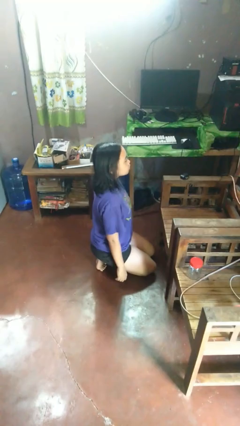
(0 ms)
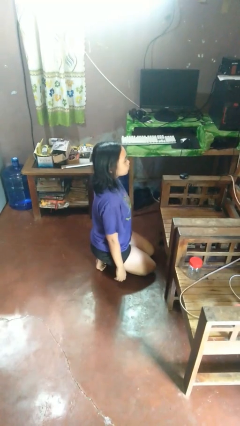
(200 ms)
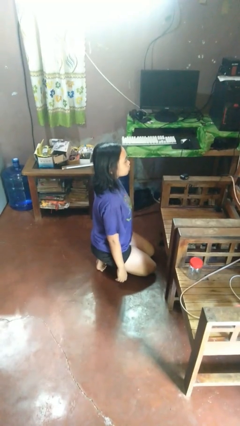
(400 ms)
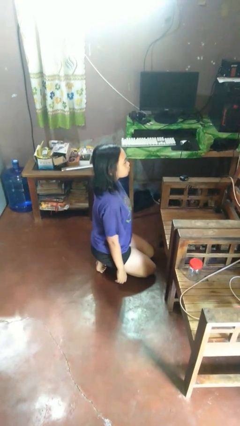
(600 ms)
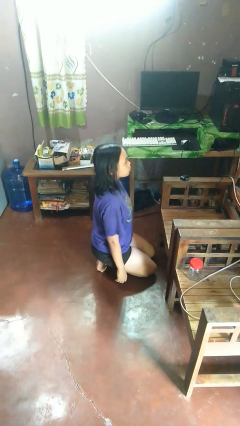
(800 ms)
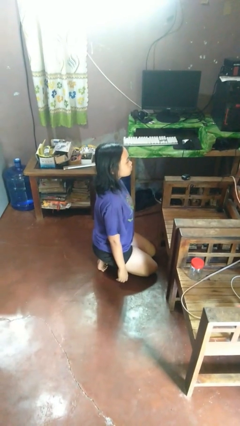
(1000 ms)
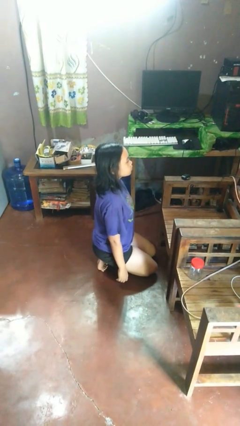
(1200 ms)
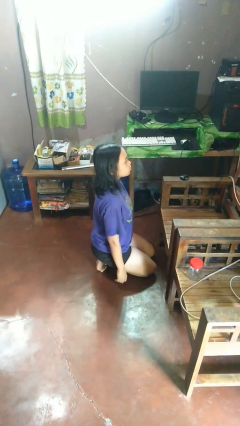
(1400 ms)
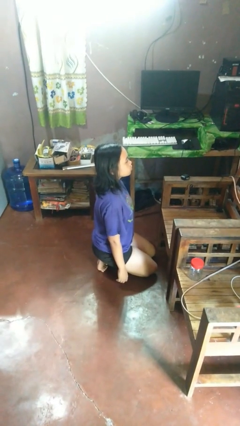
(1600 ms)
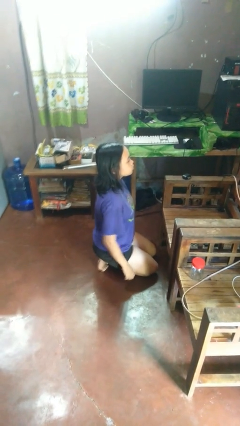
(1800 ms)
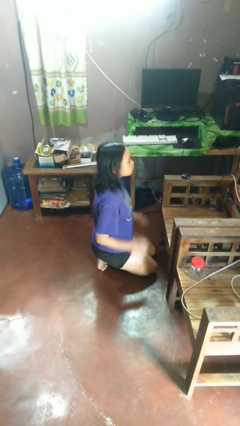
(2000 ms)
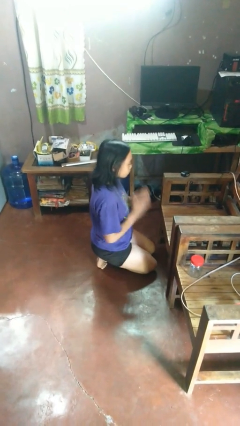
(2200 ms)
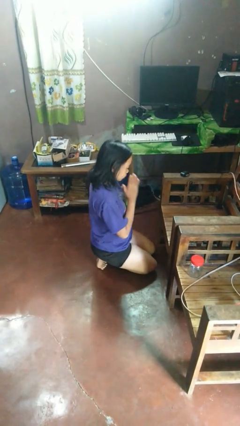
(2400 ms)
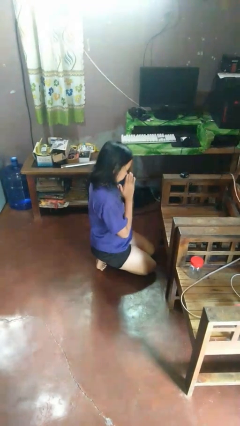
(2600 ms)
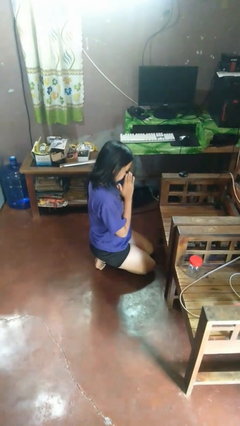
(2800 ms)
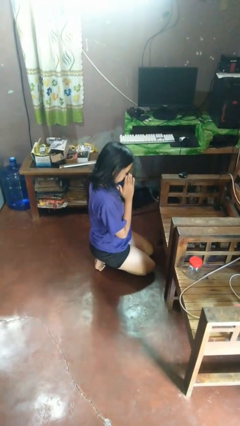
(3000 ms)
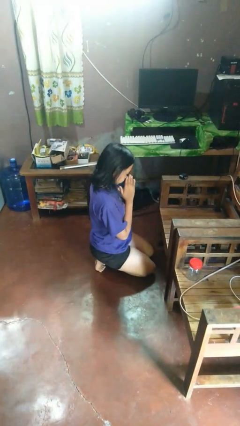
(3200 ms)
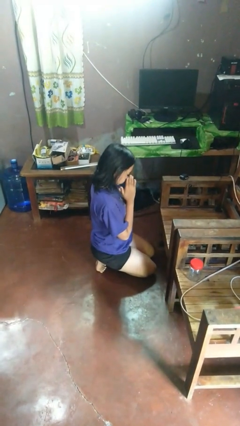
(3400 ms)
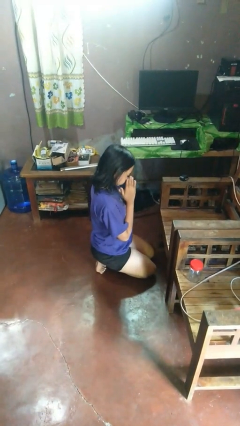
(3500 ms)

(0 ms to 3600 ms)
person prays

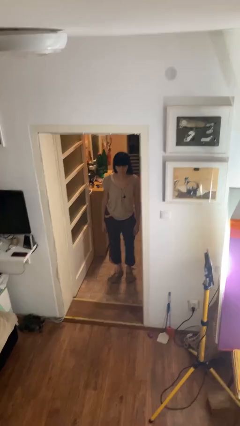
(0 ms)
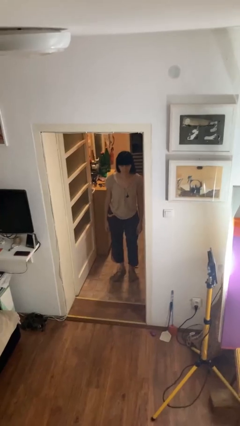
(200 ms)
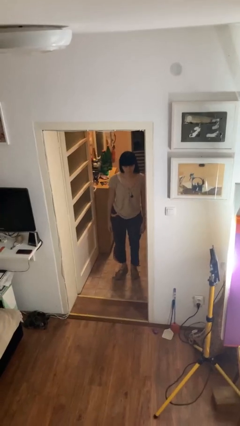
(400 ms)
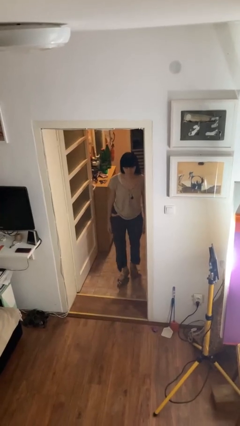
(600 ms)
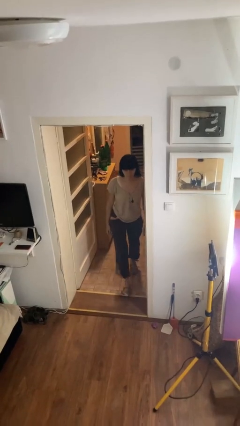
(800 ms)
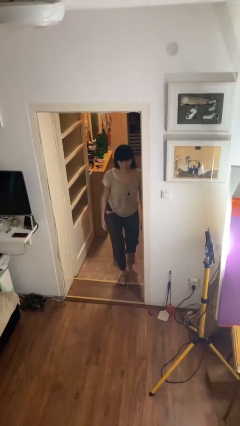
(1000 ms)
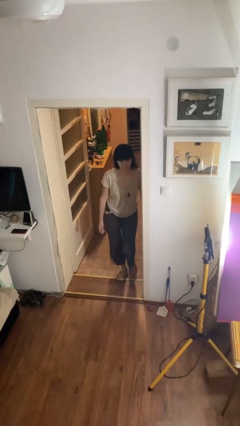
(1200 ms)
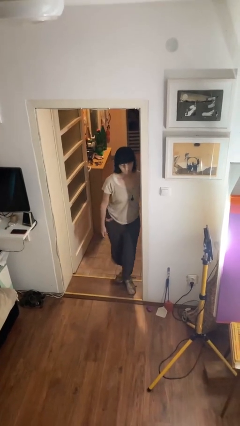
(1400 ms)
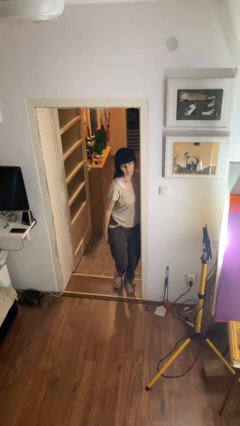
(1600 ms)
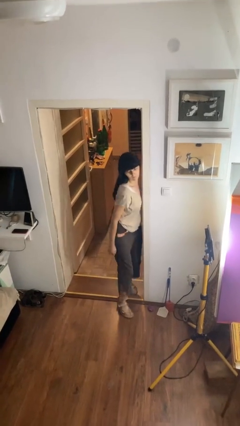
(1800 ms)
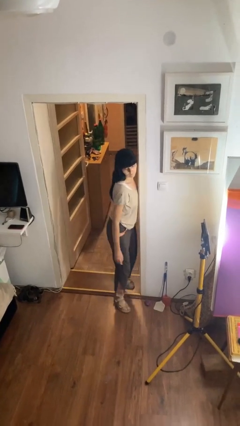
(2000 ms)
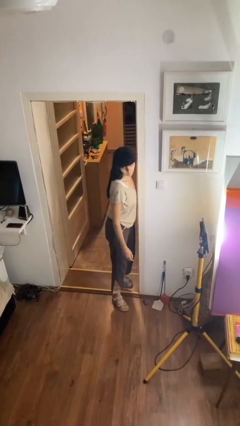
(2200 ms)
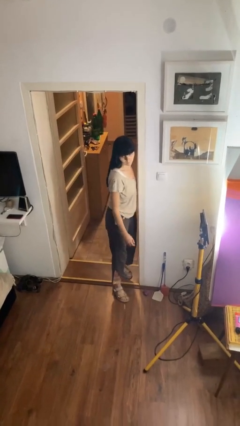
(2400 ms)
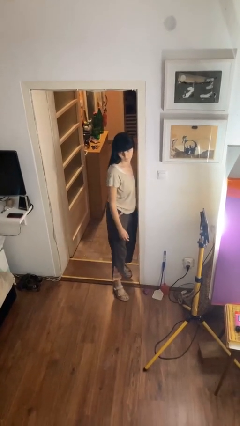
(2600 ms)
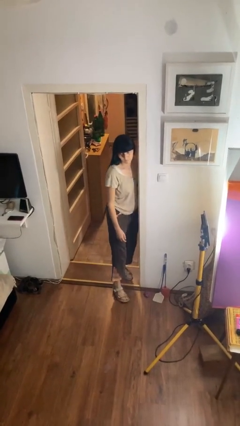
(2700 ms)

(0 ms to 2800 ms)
person bumps into wall

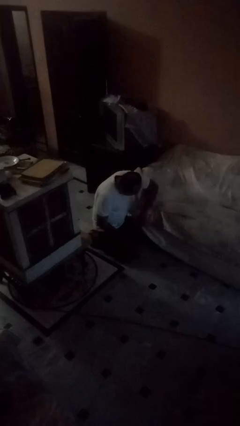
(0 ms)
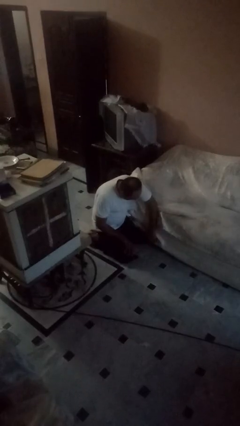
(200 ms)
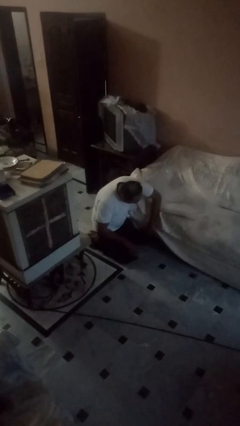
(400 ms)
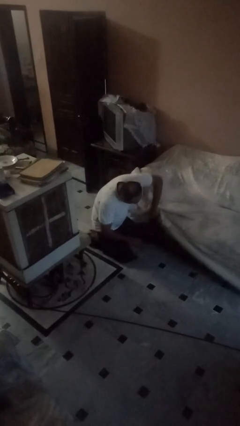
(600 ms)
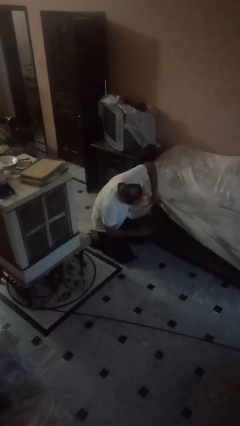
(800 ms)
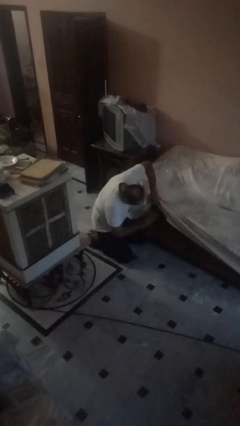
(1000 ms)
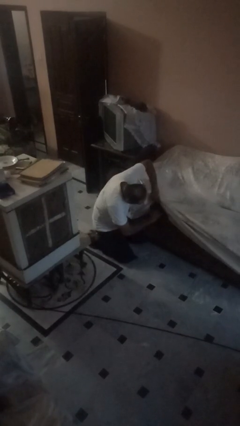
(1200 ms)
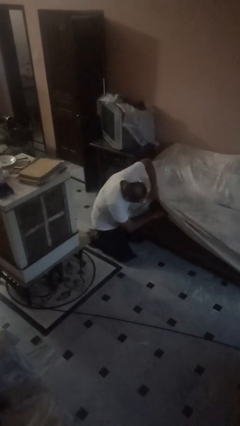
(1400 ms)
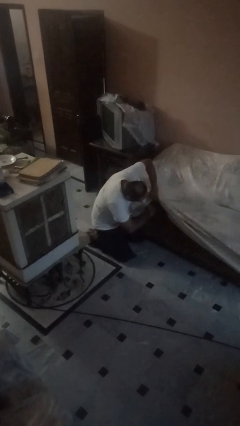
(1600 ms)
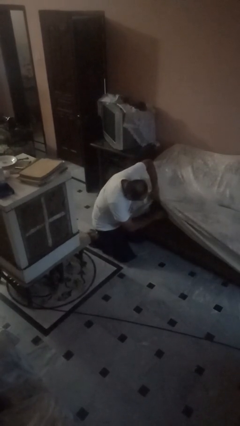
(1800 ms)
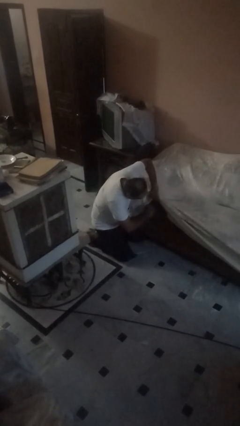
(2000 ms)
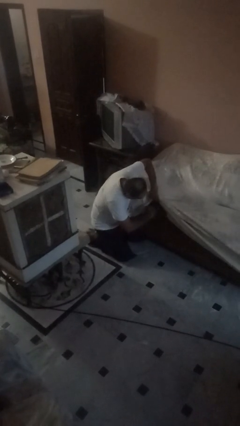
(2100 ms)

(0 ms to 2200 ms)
person searches in couch

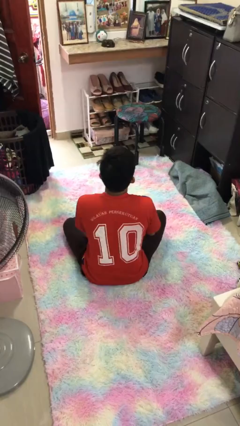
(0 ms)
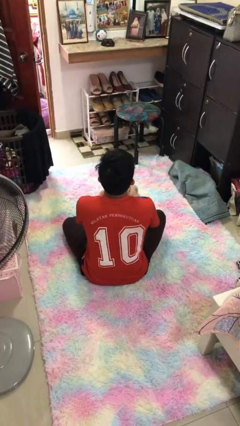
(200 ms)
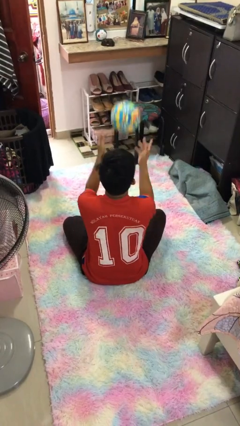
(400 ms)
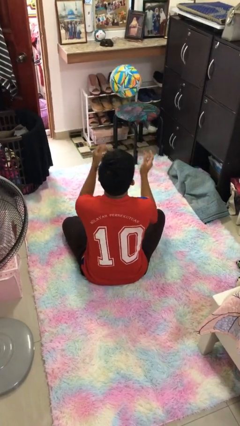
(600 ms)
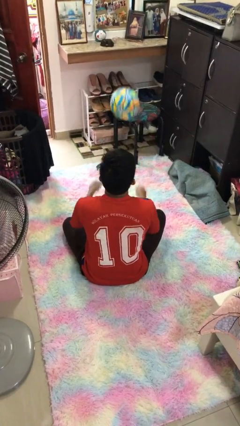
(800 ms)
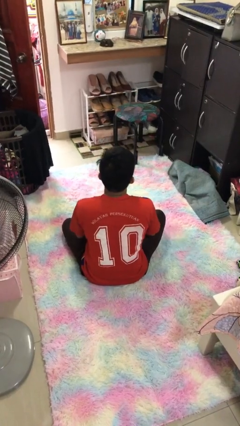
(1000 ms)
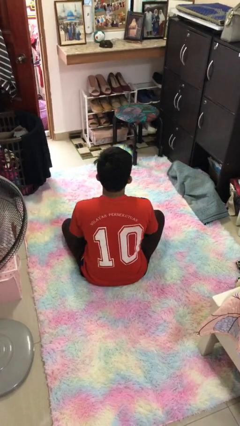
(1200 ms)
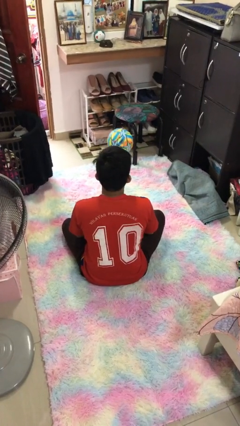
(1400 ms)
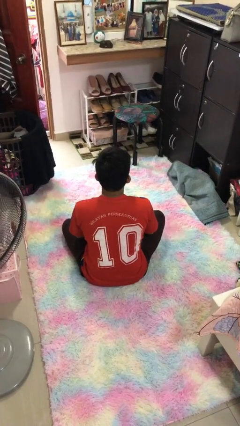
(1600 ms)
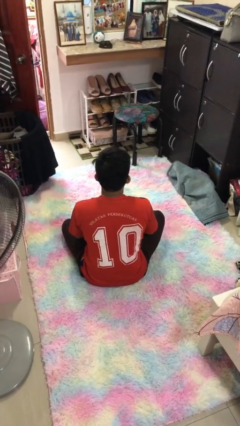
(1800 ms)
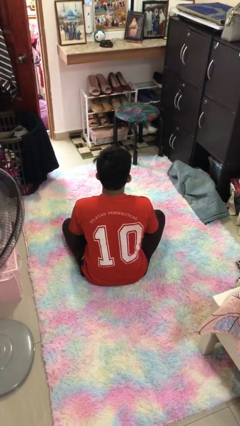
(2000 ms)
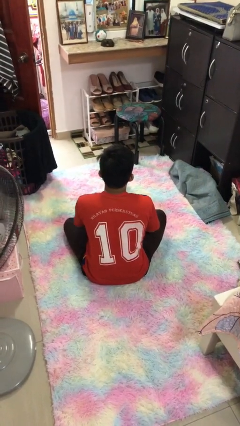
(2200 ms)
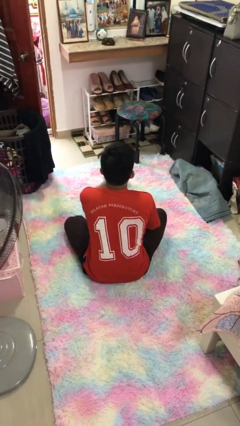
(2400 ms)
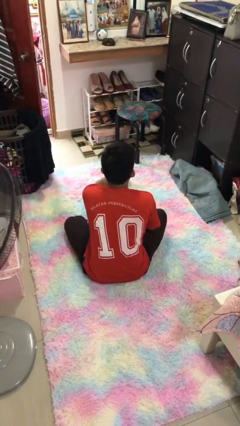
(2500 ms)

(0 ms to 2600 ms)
person bounces ball on floor

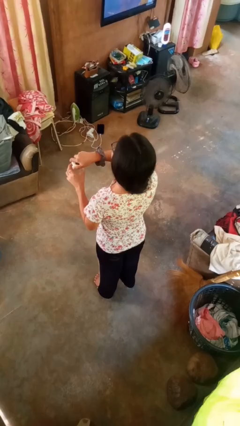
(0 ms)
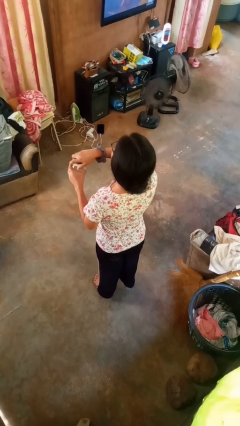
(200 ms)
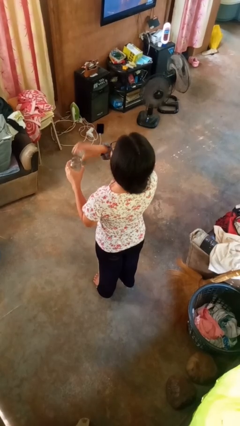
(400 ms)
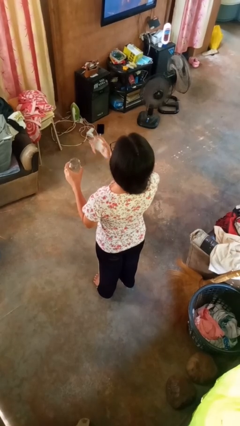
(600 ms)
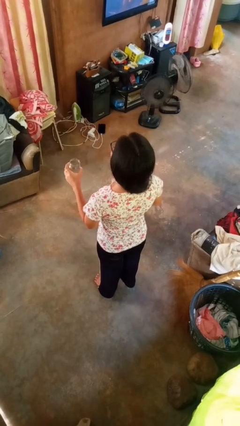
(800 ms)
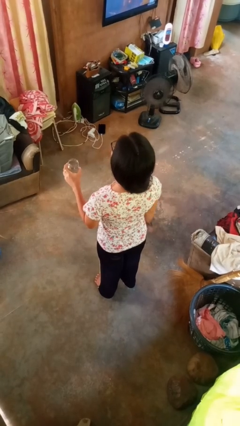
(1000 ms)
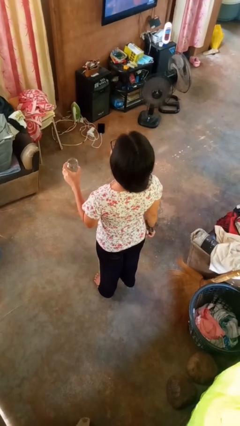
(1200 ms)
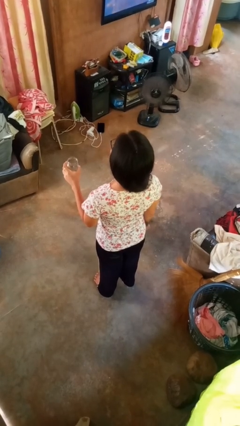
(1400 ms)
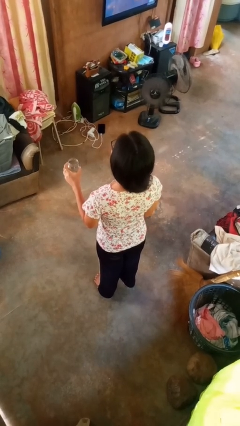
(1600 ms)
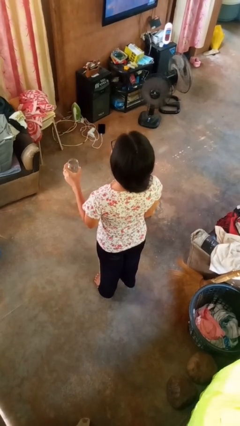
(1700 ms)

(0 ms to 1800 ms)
person opens jar

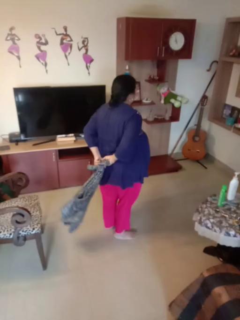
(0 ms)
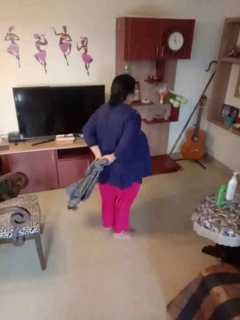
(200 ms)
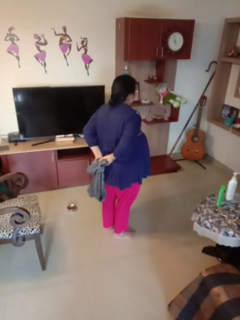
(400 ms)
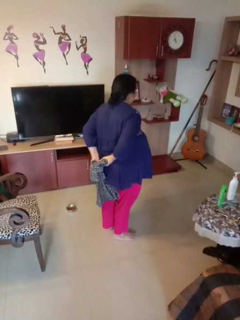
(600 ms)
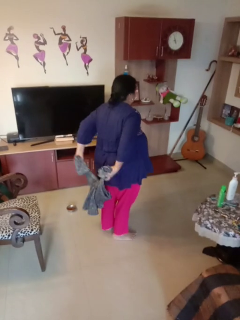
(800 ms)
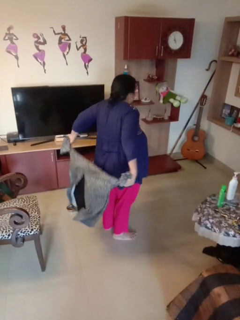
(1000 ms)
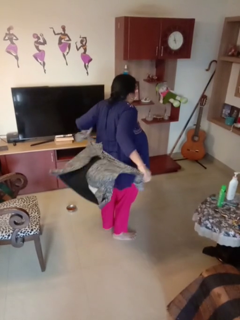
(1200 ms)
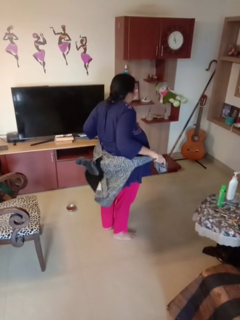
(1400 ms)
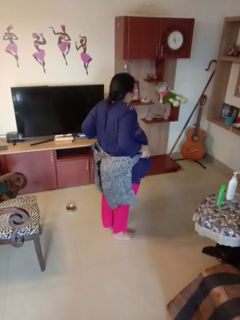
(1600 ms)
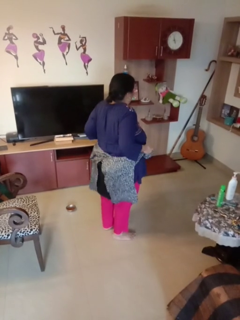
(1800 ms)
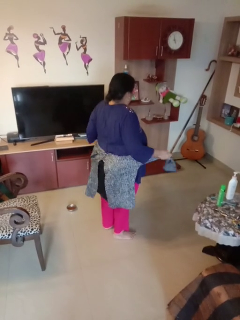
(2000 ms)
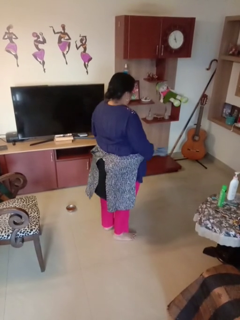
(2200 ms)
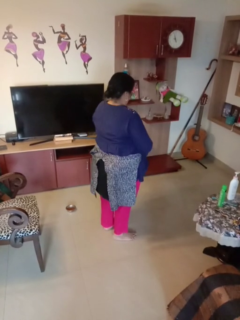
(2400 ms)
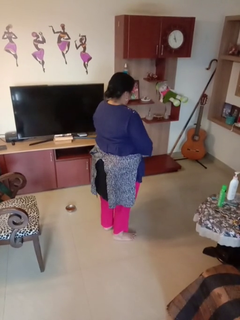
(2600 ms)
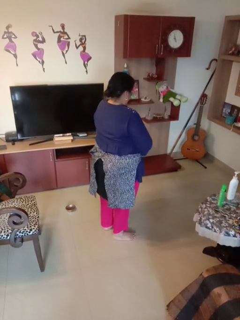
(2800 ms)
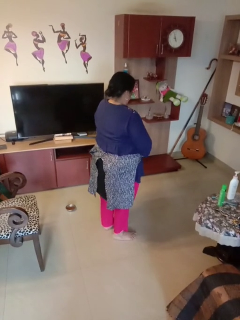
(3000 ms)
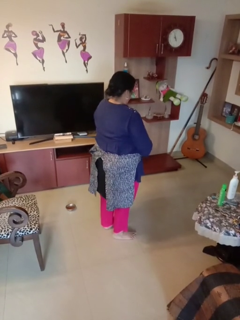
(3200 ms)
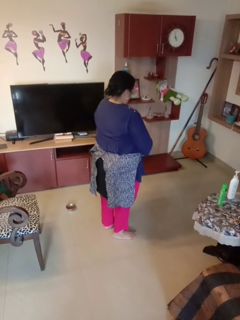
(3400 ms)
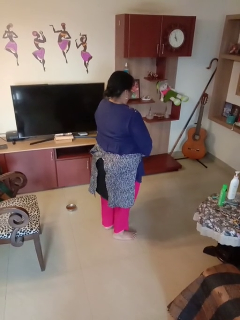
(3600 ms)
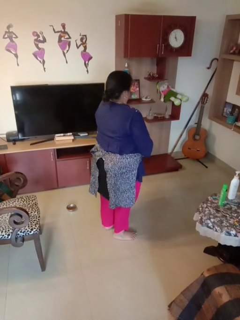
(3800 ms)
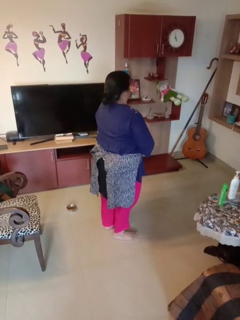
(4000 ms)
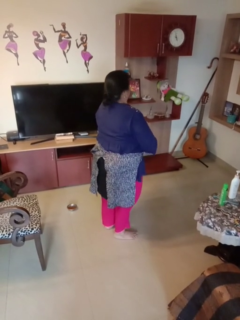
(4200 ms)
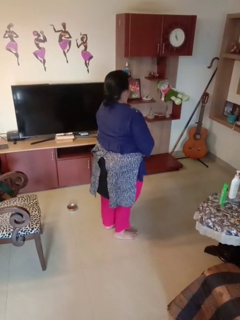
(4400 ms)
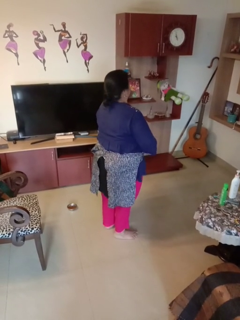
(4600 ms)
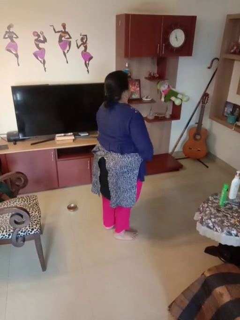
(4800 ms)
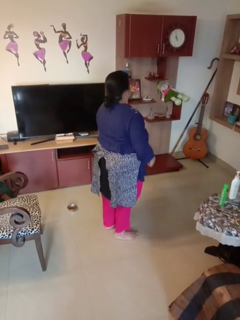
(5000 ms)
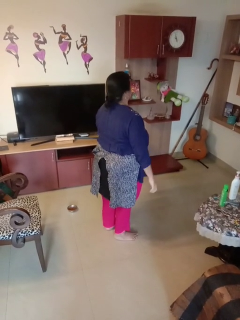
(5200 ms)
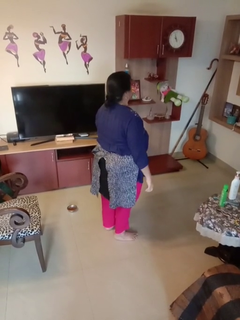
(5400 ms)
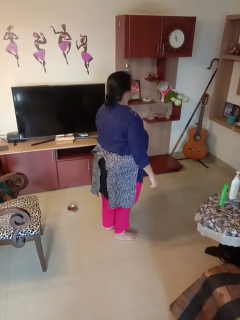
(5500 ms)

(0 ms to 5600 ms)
person ties jacket around waist

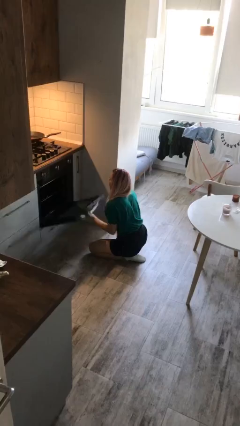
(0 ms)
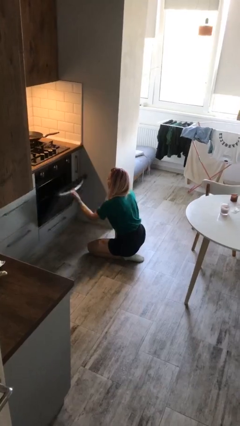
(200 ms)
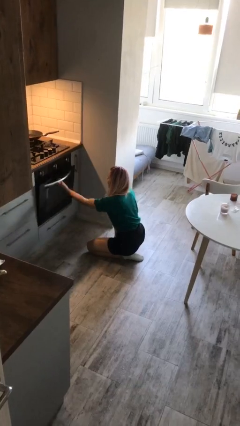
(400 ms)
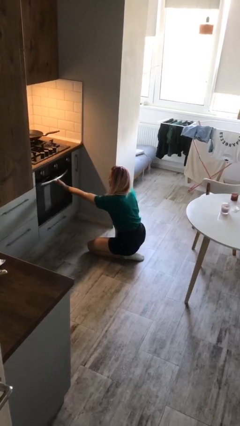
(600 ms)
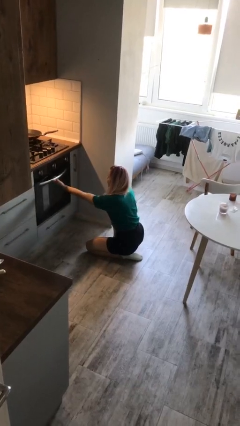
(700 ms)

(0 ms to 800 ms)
person closes oven door
